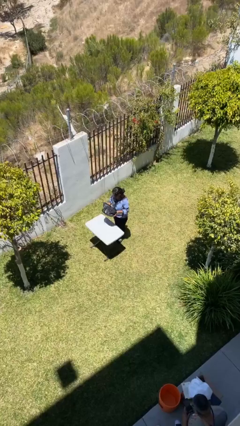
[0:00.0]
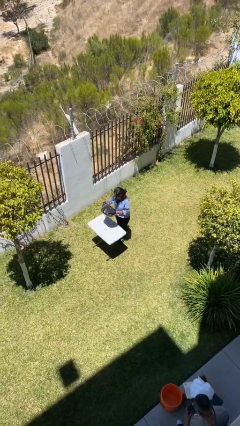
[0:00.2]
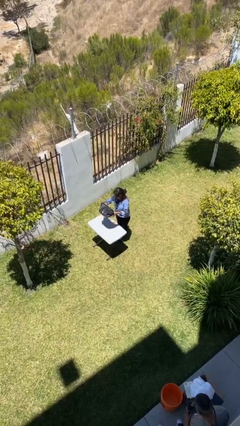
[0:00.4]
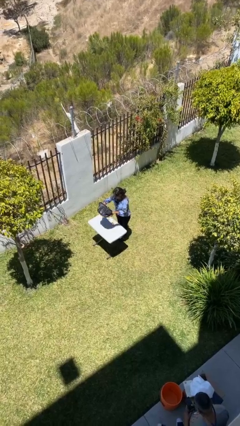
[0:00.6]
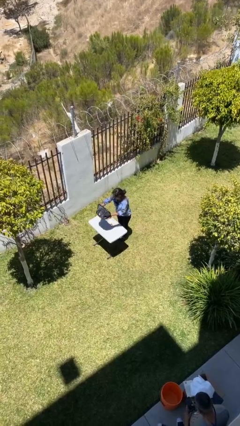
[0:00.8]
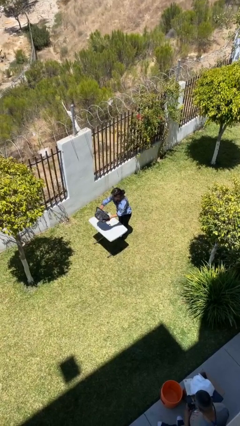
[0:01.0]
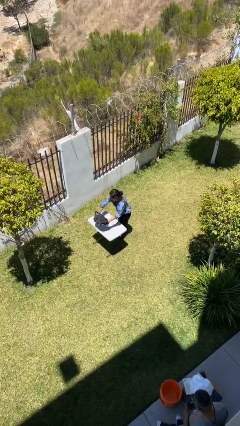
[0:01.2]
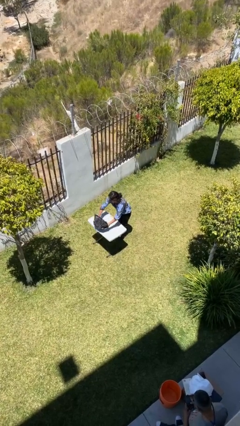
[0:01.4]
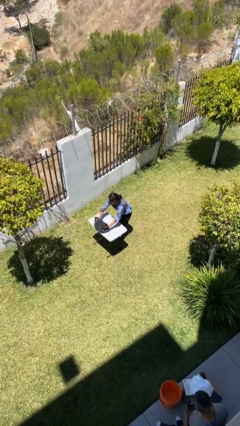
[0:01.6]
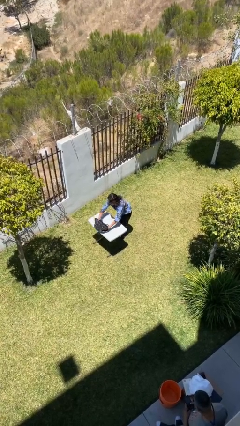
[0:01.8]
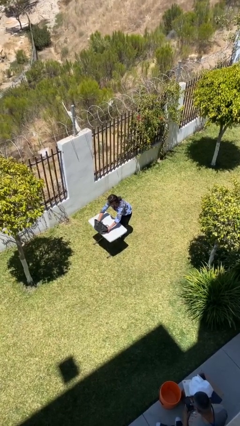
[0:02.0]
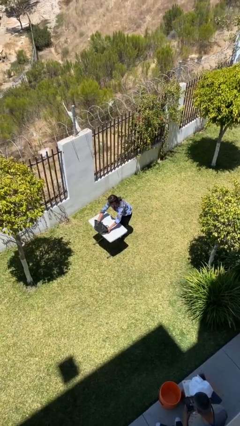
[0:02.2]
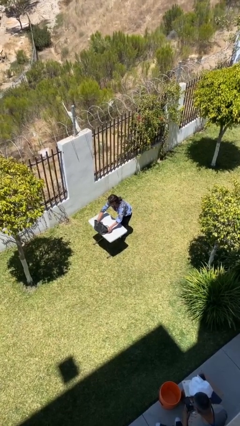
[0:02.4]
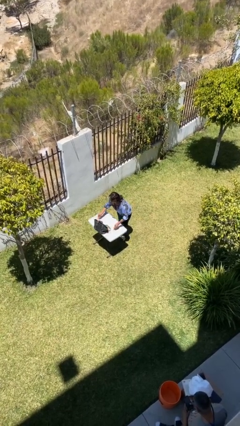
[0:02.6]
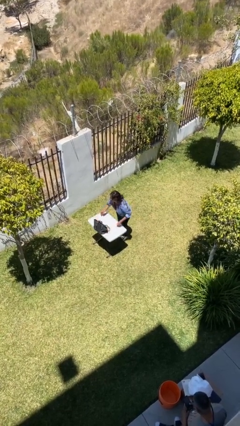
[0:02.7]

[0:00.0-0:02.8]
person puts down object on table

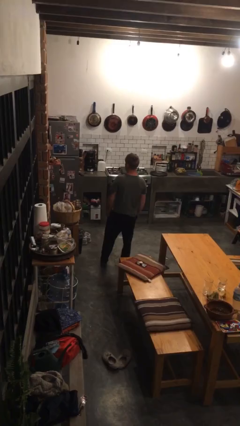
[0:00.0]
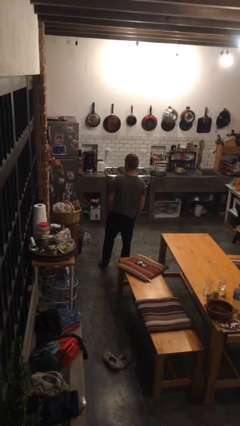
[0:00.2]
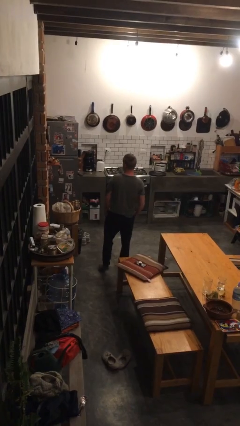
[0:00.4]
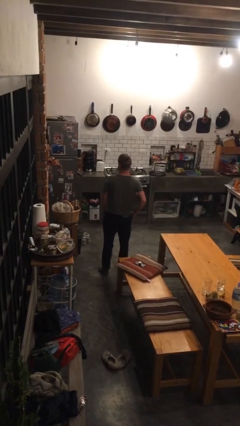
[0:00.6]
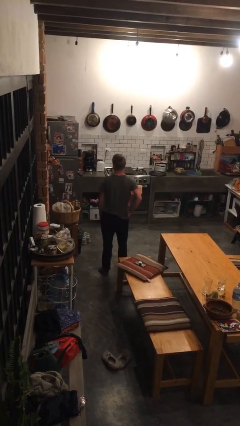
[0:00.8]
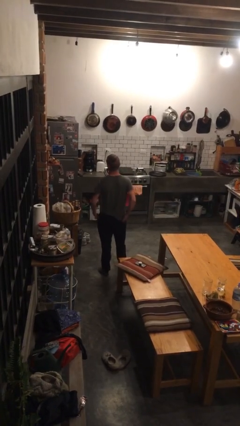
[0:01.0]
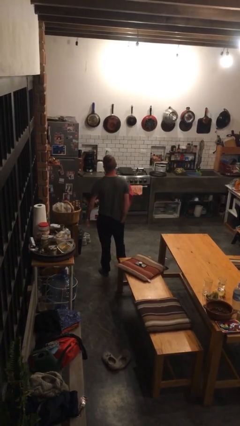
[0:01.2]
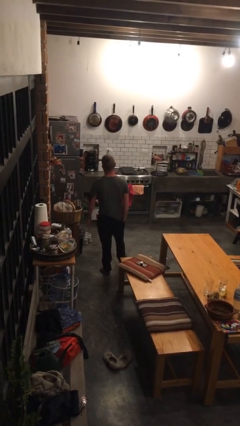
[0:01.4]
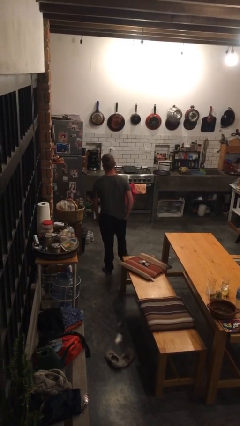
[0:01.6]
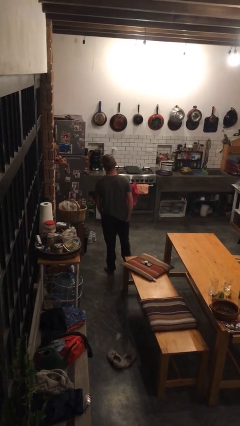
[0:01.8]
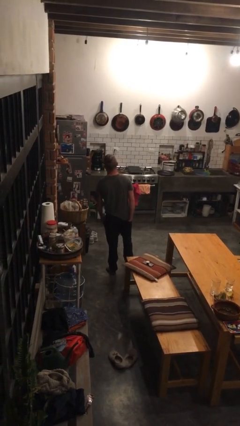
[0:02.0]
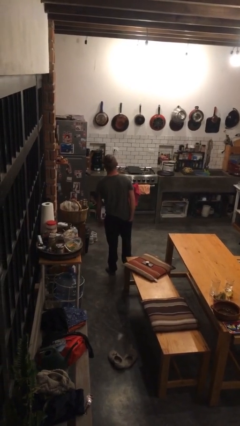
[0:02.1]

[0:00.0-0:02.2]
person puts hands in back pockets

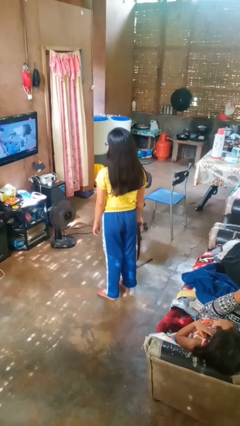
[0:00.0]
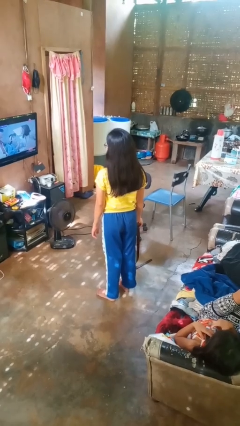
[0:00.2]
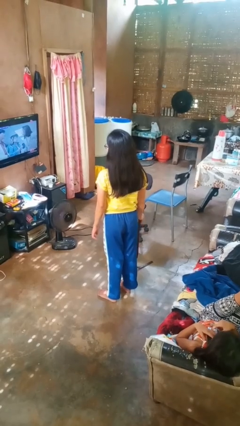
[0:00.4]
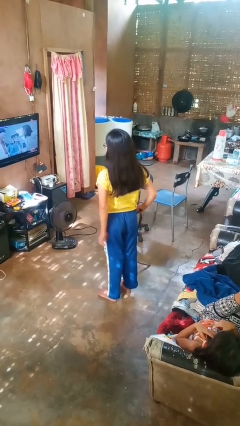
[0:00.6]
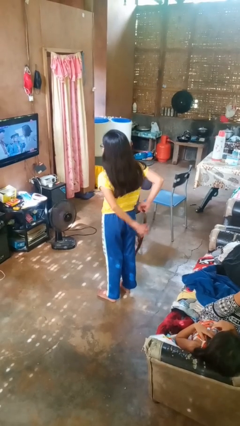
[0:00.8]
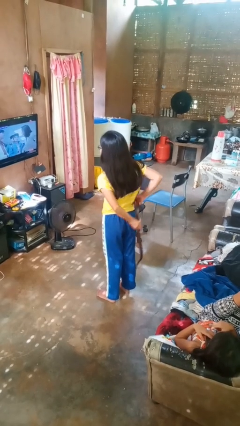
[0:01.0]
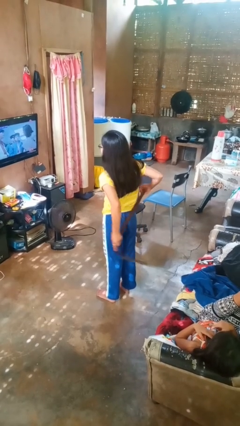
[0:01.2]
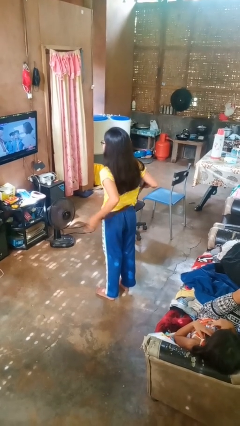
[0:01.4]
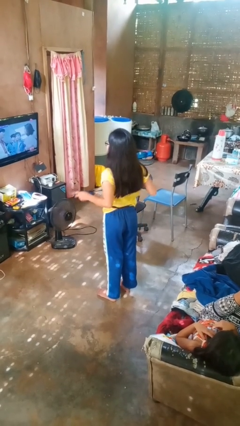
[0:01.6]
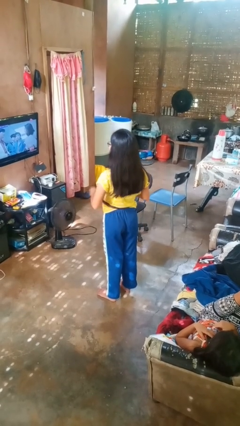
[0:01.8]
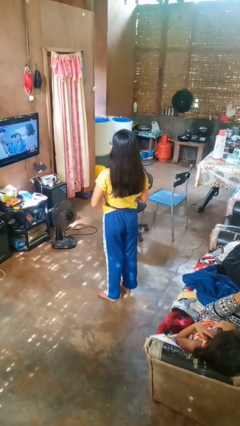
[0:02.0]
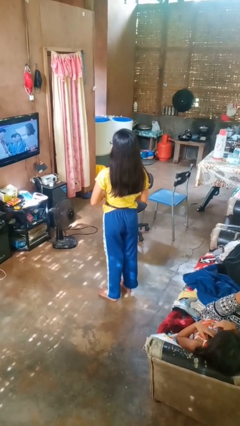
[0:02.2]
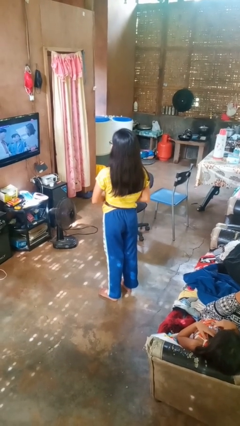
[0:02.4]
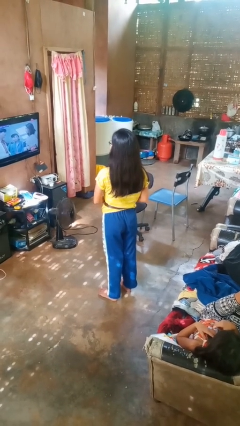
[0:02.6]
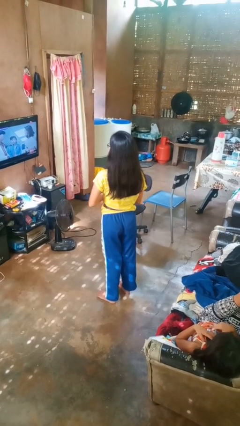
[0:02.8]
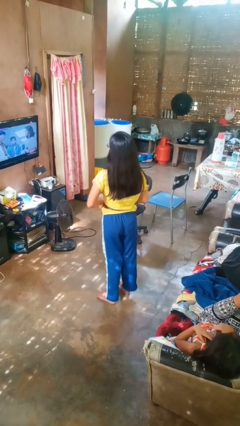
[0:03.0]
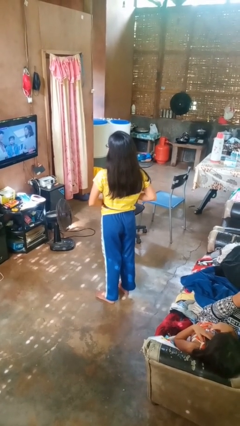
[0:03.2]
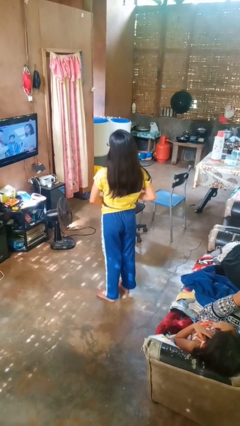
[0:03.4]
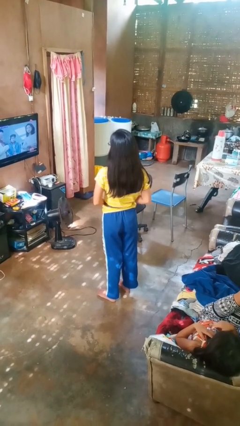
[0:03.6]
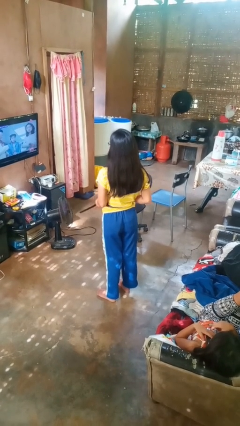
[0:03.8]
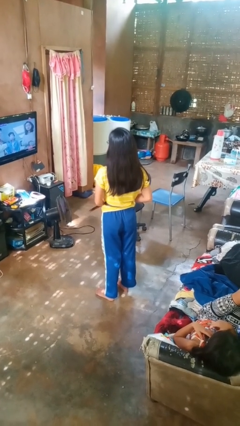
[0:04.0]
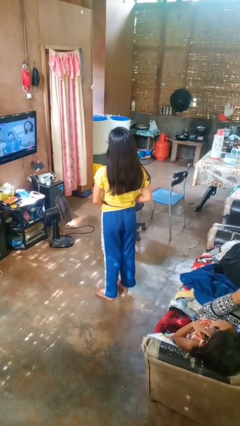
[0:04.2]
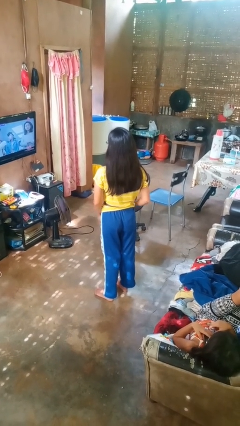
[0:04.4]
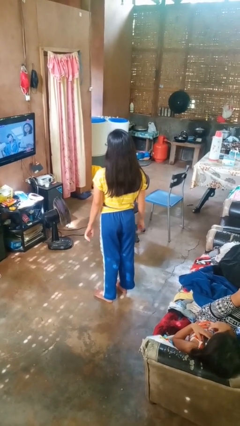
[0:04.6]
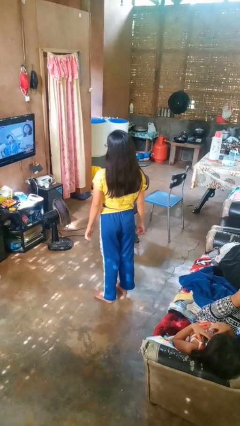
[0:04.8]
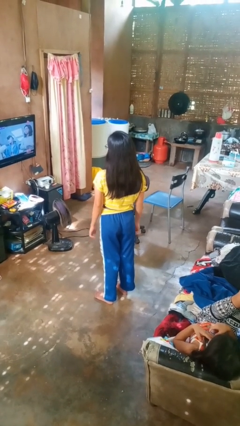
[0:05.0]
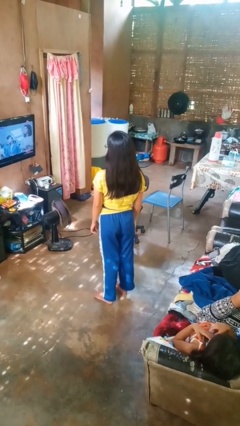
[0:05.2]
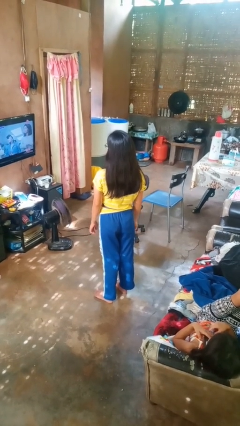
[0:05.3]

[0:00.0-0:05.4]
person puts on belt

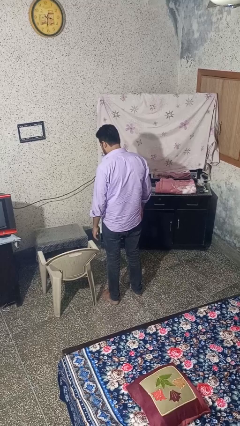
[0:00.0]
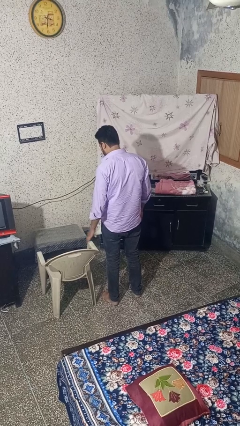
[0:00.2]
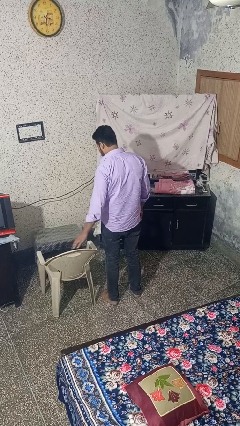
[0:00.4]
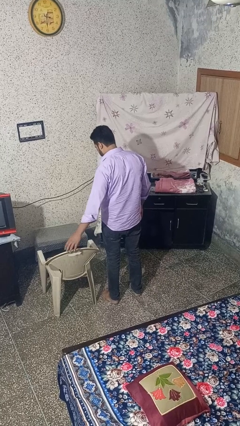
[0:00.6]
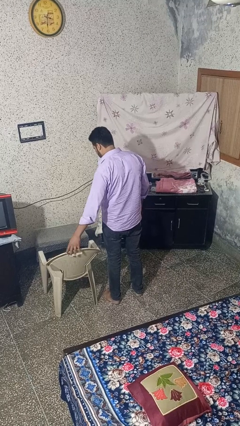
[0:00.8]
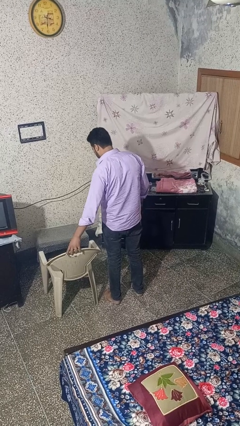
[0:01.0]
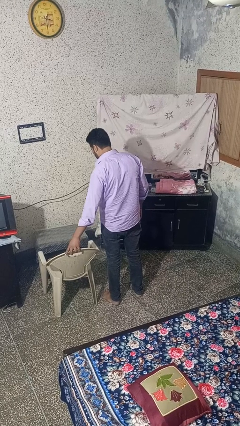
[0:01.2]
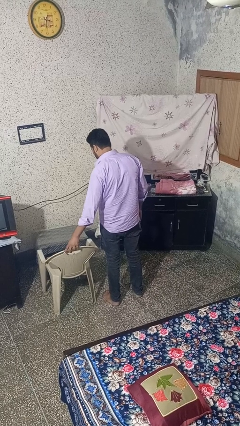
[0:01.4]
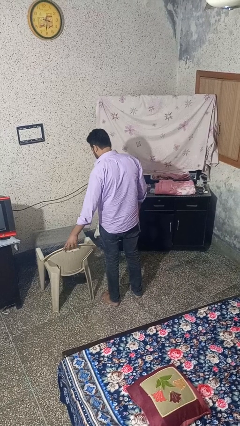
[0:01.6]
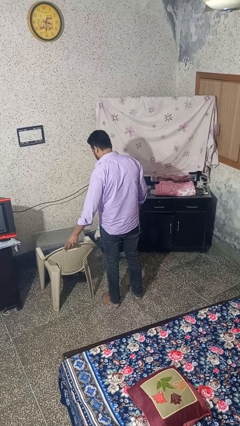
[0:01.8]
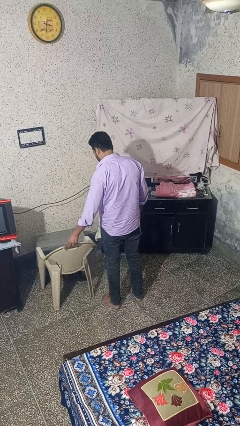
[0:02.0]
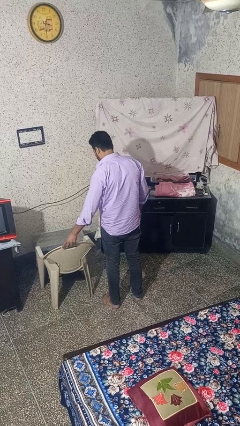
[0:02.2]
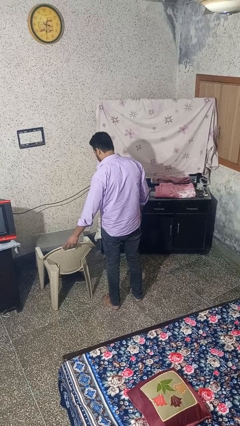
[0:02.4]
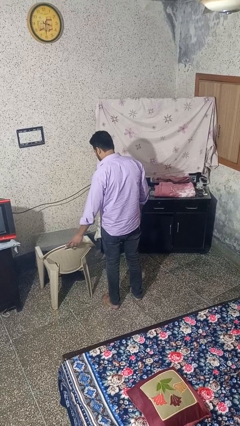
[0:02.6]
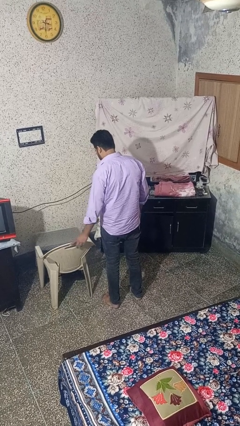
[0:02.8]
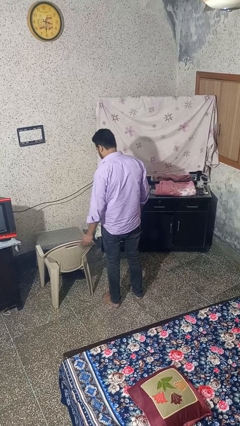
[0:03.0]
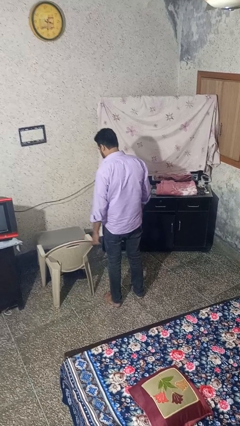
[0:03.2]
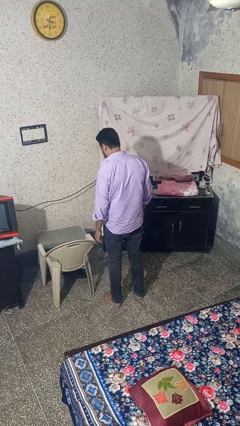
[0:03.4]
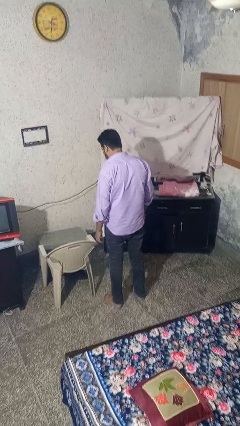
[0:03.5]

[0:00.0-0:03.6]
person pushes in chair

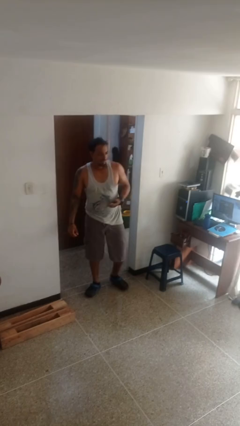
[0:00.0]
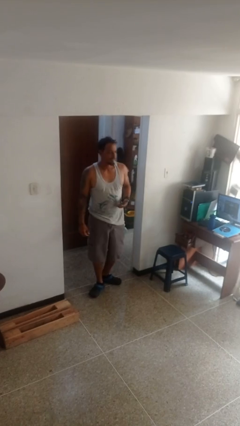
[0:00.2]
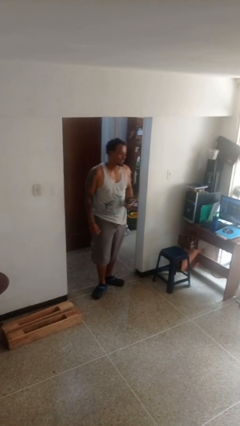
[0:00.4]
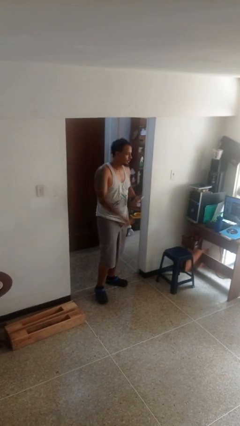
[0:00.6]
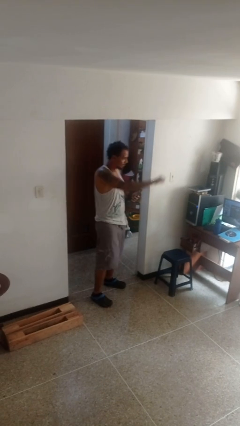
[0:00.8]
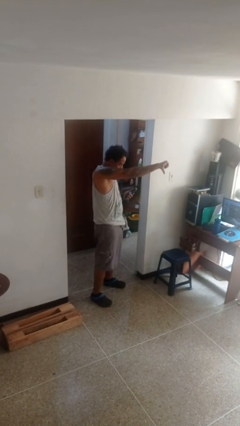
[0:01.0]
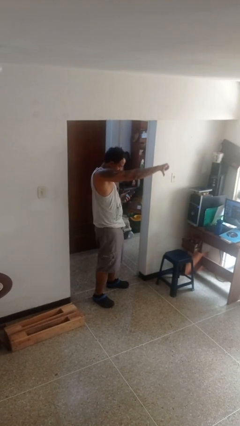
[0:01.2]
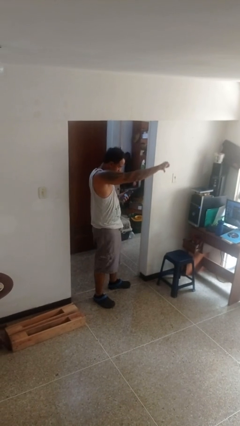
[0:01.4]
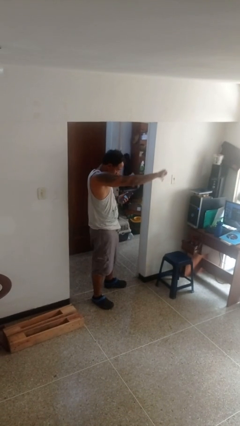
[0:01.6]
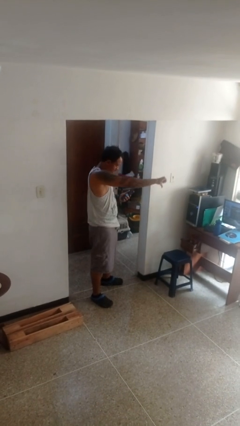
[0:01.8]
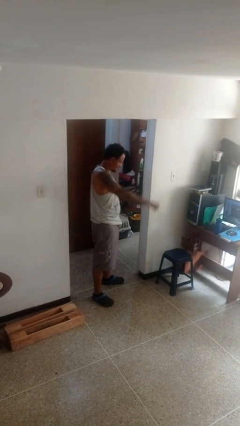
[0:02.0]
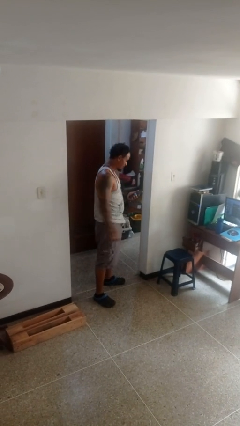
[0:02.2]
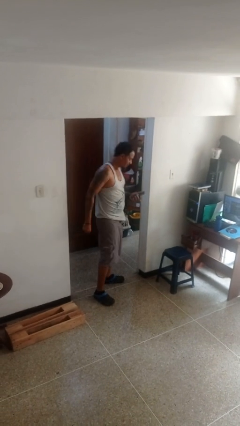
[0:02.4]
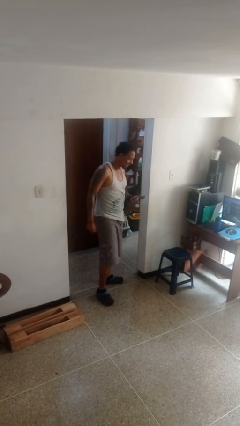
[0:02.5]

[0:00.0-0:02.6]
person gestures thumbs down

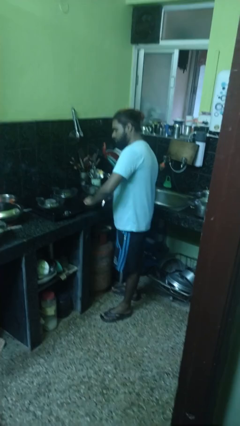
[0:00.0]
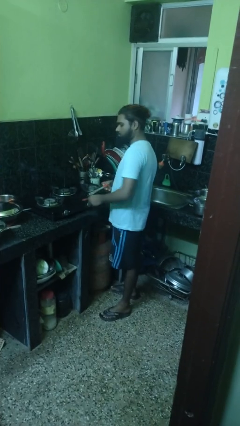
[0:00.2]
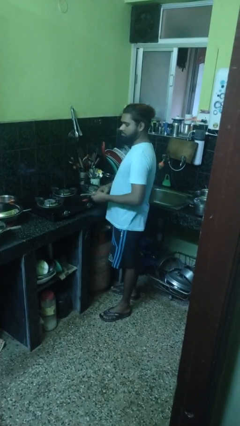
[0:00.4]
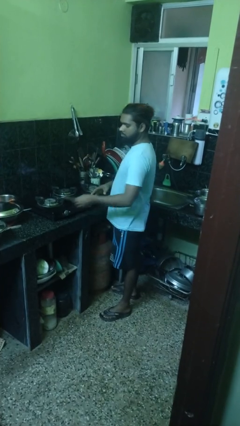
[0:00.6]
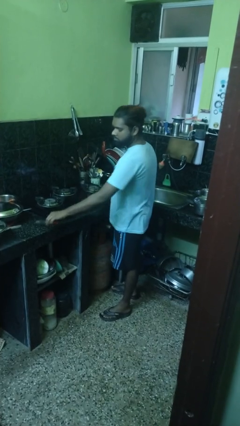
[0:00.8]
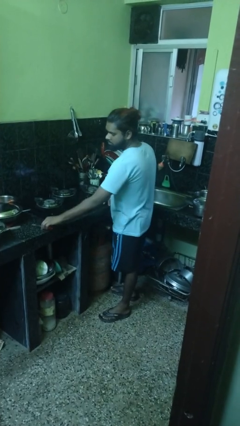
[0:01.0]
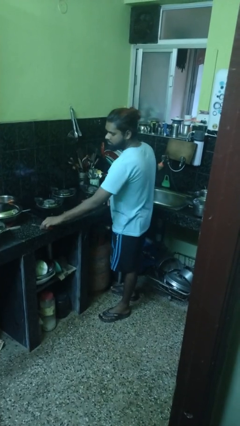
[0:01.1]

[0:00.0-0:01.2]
person turns off stovetop
